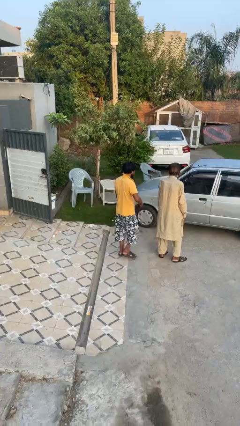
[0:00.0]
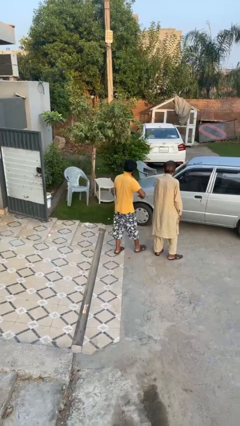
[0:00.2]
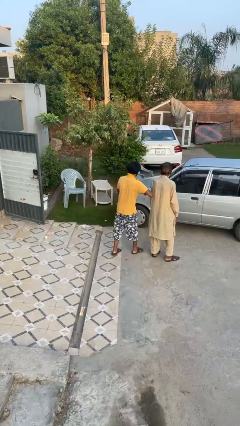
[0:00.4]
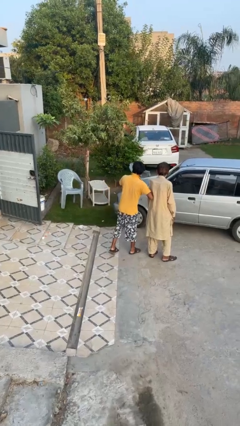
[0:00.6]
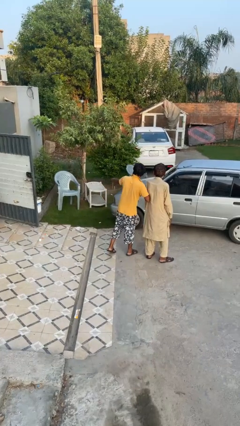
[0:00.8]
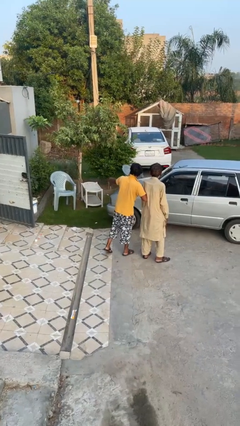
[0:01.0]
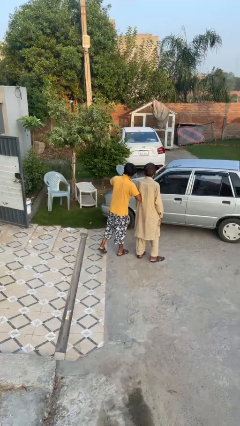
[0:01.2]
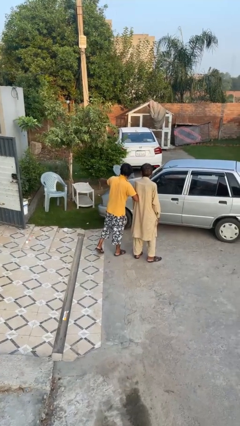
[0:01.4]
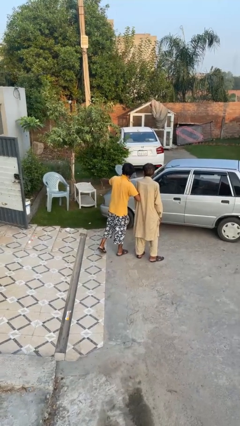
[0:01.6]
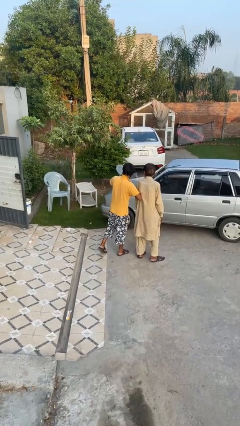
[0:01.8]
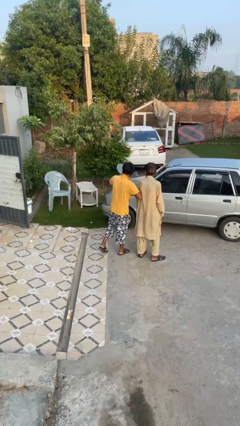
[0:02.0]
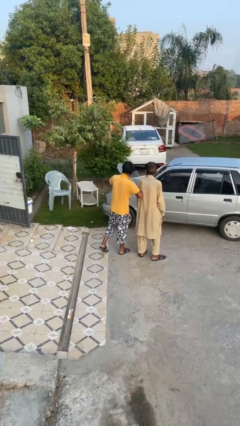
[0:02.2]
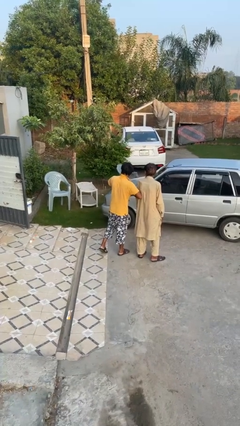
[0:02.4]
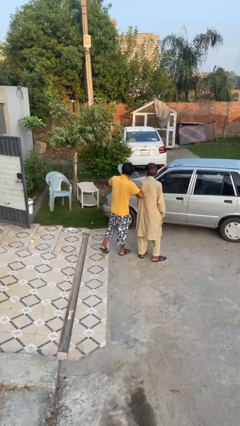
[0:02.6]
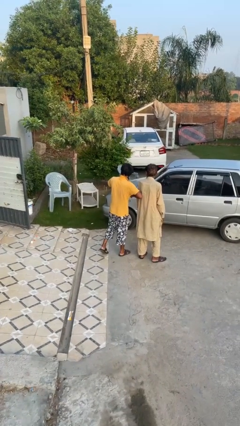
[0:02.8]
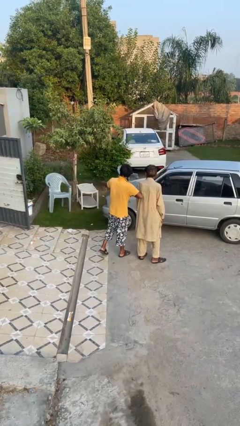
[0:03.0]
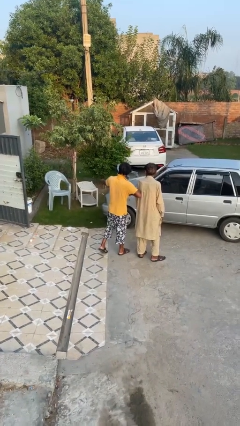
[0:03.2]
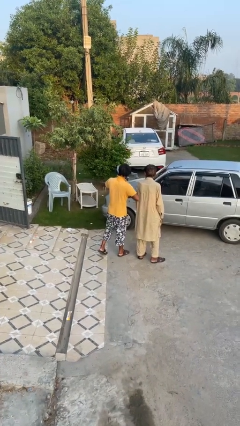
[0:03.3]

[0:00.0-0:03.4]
person nudges person with elbow

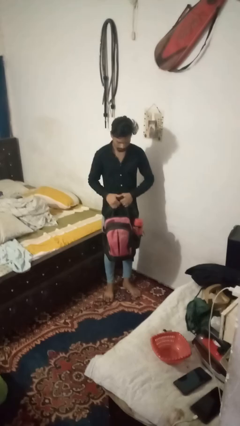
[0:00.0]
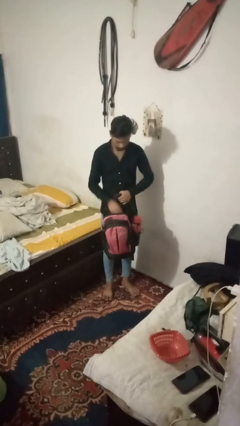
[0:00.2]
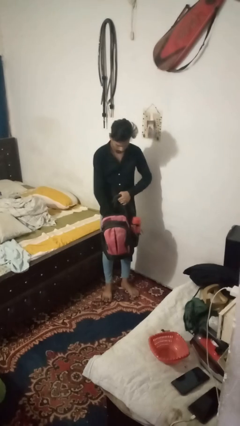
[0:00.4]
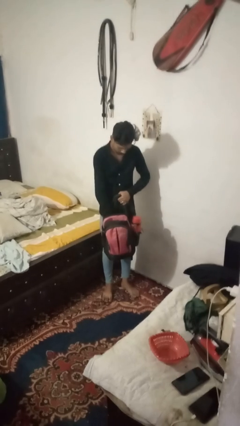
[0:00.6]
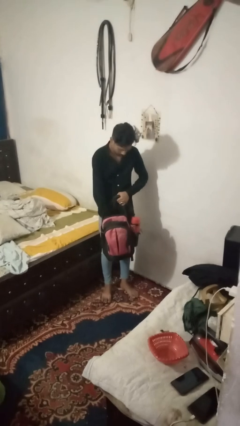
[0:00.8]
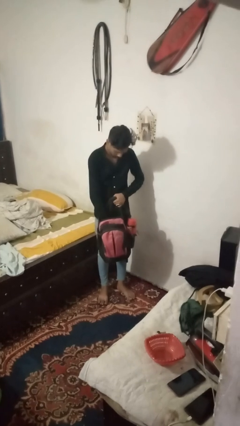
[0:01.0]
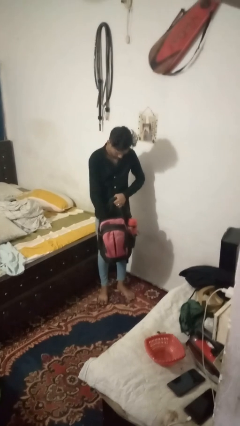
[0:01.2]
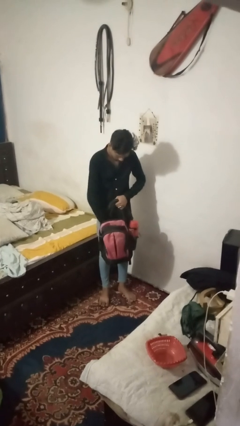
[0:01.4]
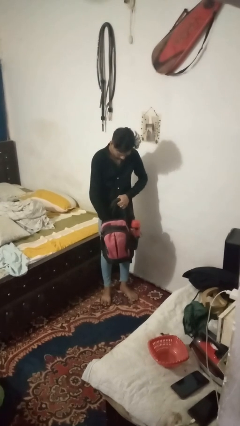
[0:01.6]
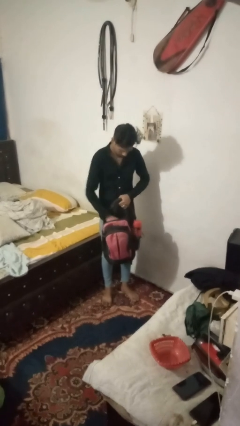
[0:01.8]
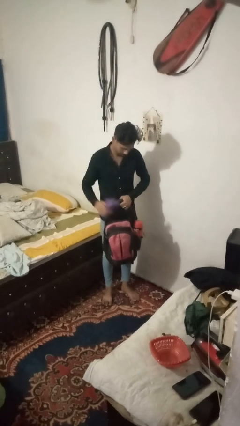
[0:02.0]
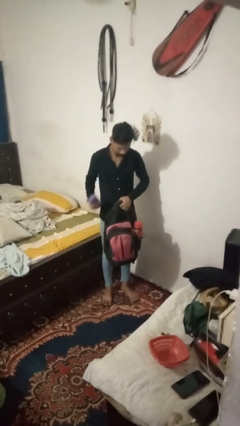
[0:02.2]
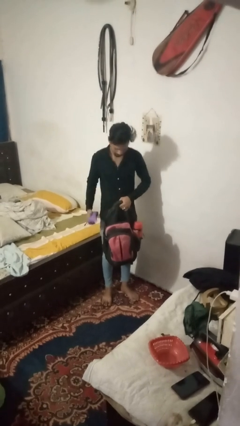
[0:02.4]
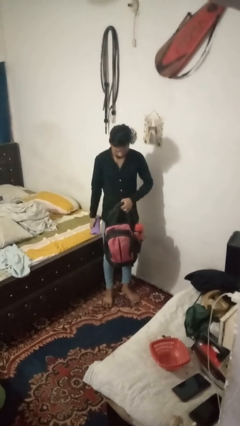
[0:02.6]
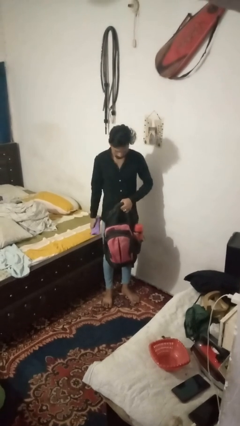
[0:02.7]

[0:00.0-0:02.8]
person takes object from bag

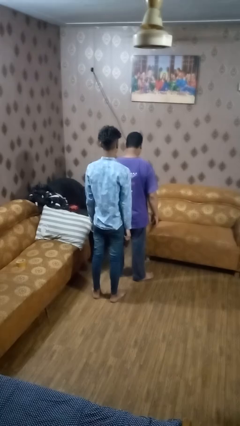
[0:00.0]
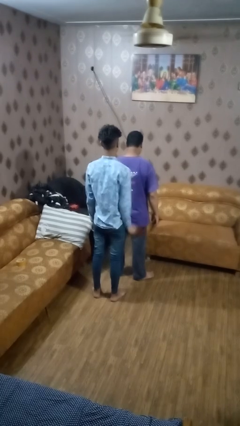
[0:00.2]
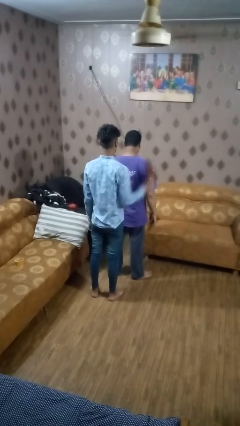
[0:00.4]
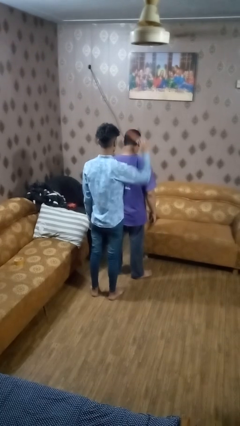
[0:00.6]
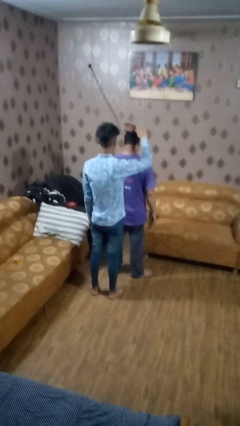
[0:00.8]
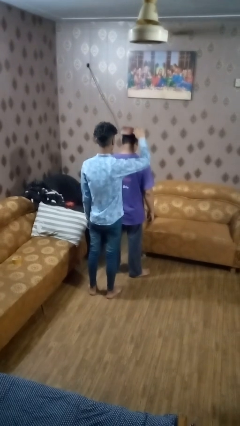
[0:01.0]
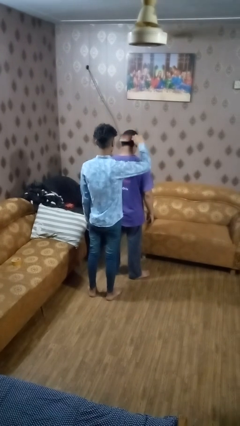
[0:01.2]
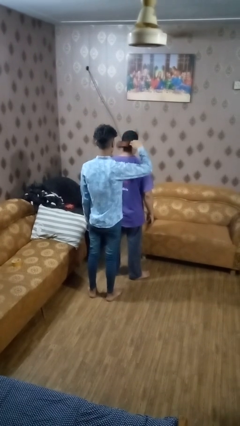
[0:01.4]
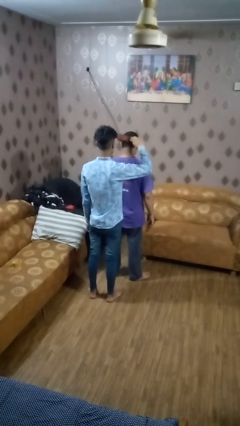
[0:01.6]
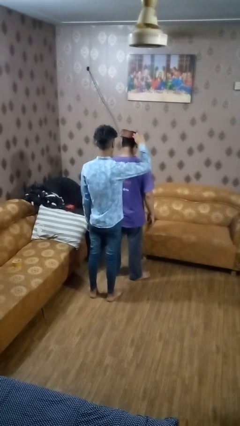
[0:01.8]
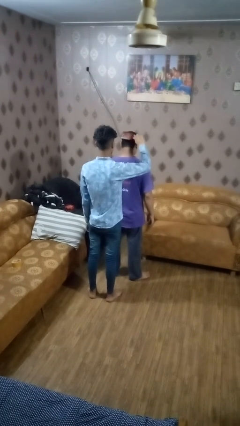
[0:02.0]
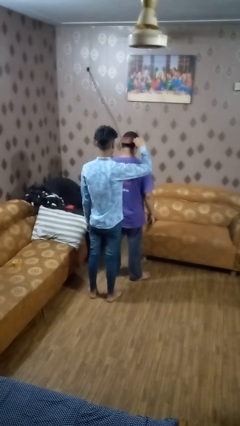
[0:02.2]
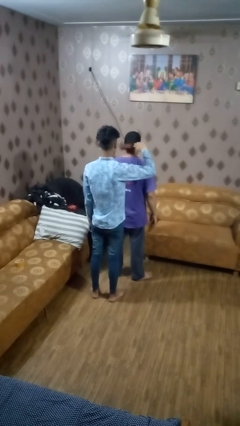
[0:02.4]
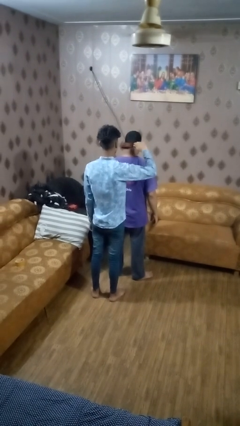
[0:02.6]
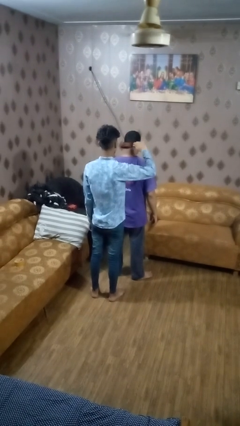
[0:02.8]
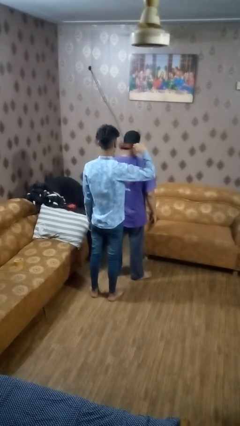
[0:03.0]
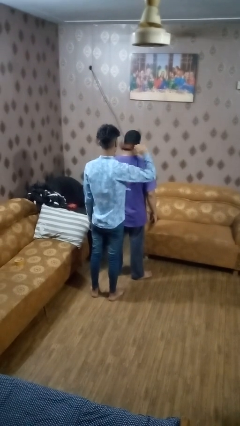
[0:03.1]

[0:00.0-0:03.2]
person brushes hair of person

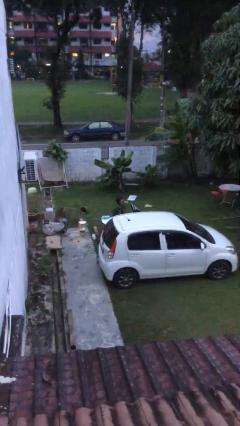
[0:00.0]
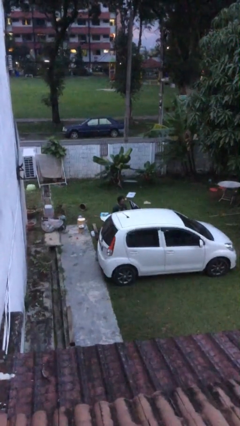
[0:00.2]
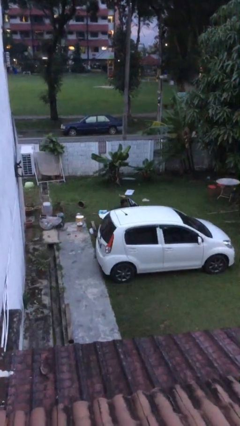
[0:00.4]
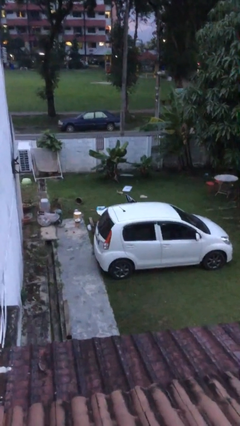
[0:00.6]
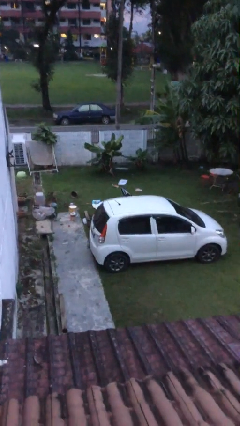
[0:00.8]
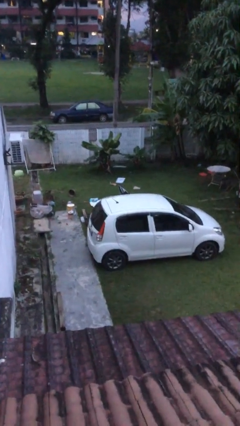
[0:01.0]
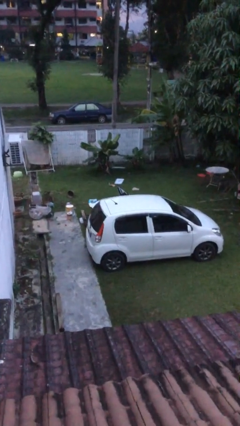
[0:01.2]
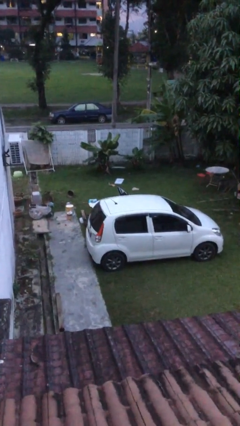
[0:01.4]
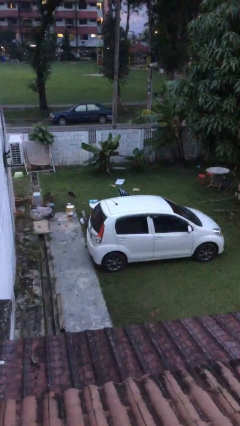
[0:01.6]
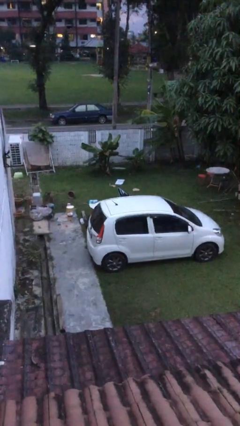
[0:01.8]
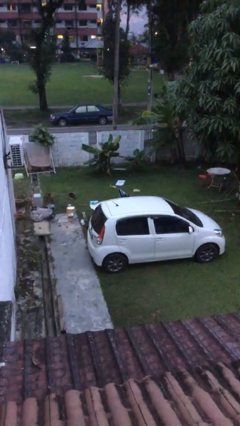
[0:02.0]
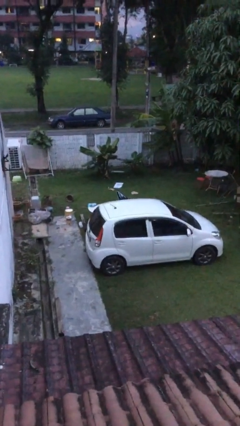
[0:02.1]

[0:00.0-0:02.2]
person enters car

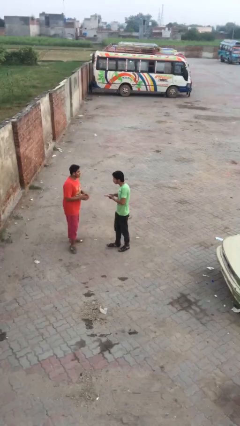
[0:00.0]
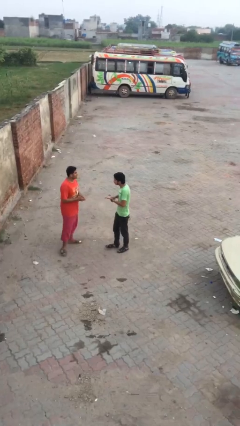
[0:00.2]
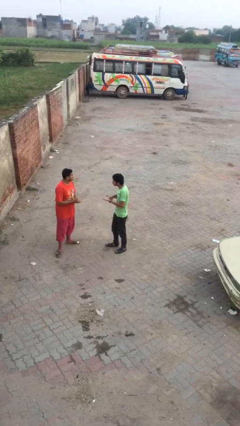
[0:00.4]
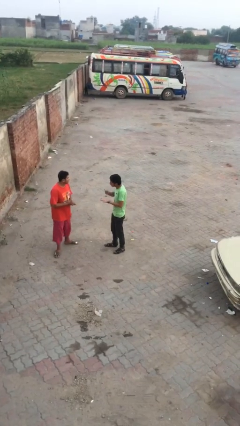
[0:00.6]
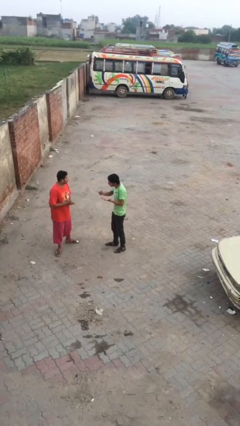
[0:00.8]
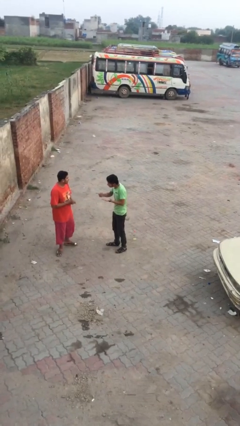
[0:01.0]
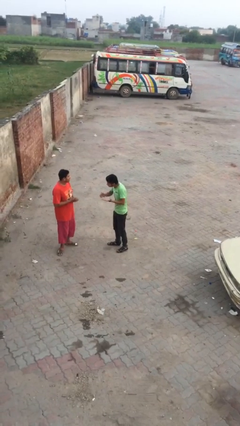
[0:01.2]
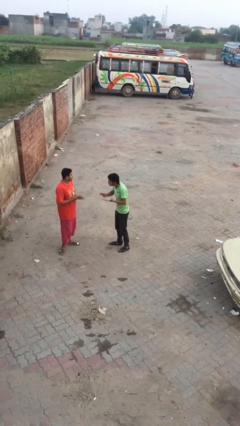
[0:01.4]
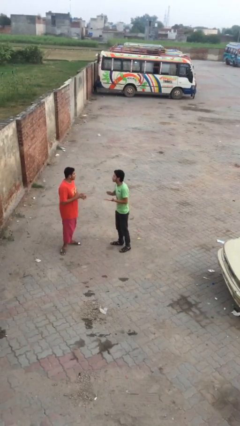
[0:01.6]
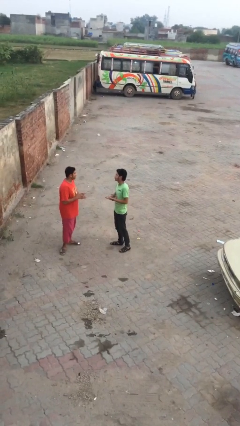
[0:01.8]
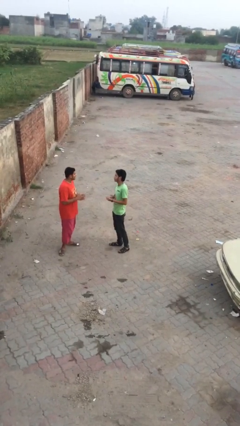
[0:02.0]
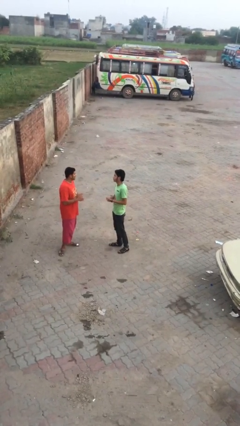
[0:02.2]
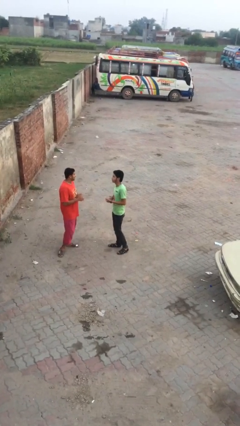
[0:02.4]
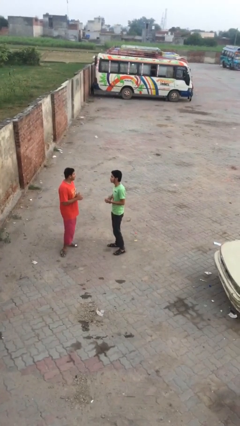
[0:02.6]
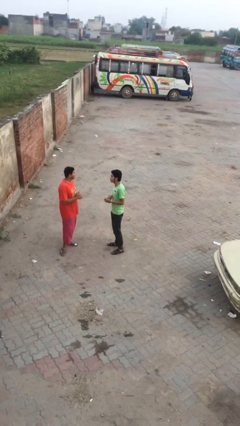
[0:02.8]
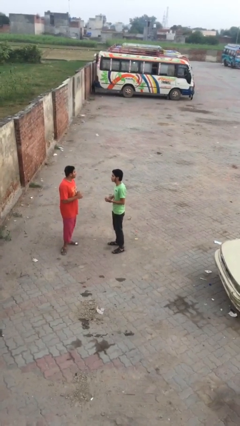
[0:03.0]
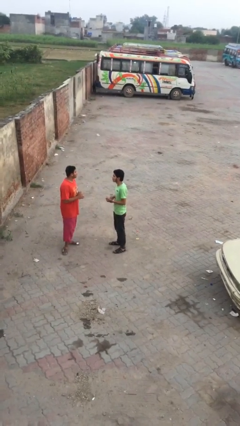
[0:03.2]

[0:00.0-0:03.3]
person talks to person

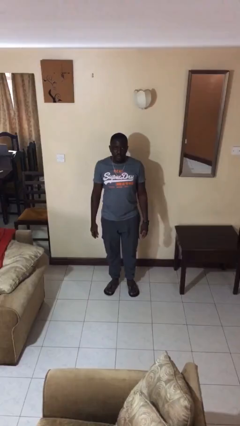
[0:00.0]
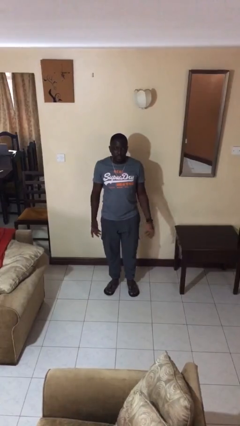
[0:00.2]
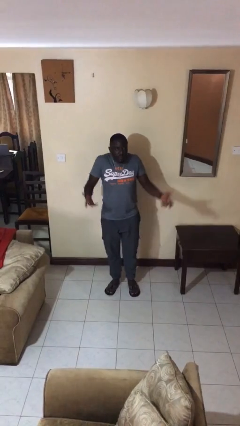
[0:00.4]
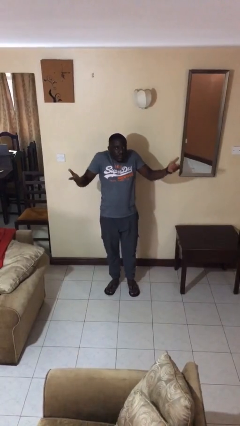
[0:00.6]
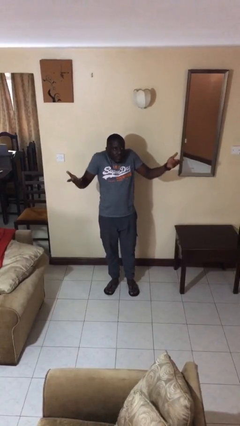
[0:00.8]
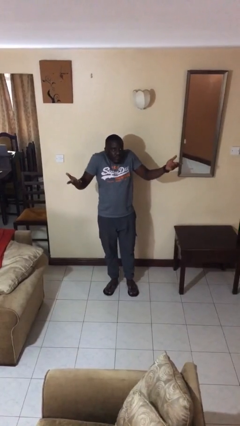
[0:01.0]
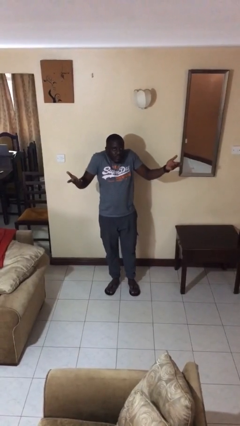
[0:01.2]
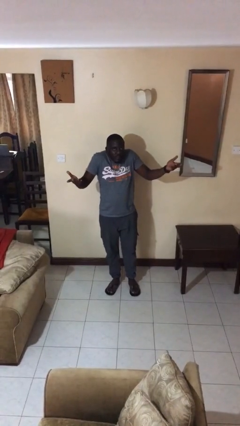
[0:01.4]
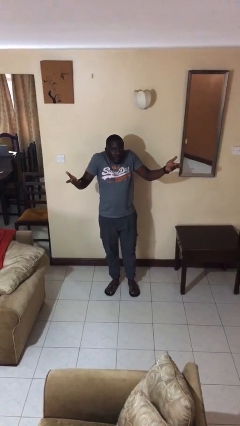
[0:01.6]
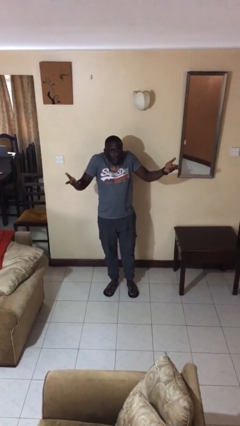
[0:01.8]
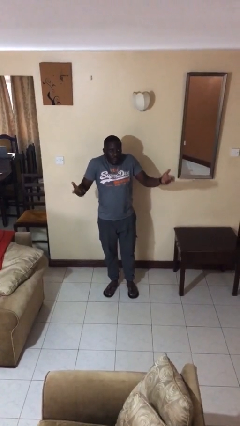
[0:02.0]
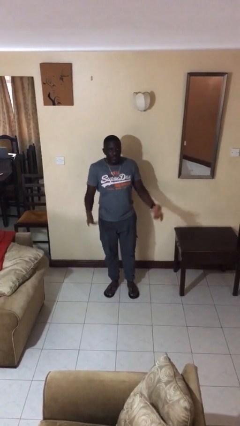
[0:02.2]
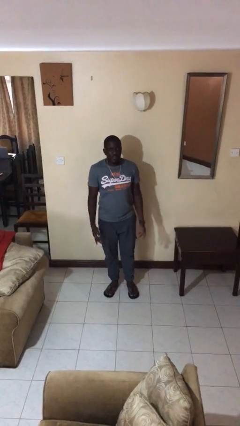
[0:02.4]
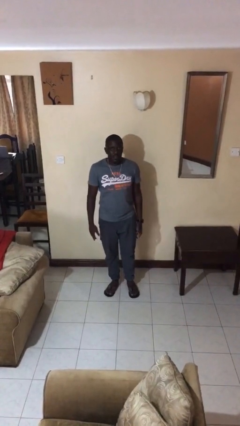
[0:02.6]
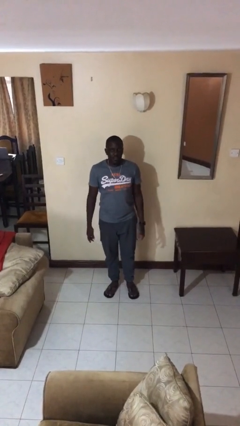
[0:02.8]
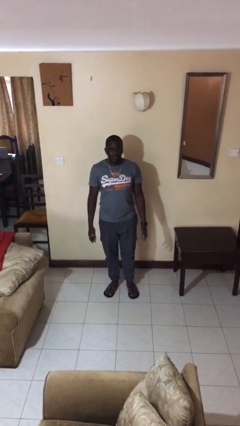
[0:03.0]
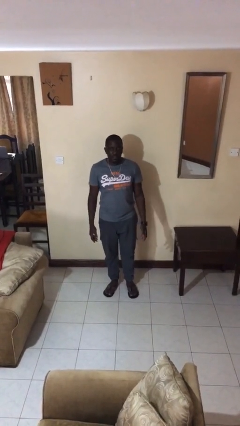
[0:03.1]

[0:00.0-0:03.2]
person shrugs
